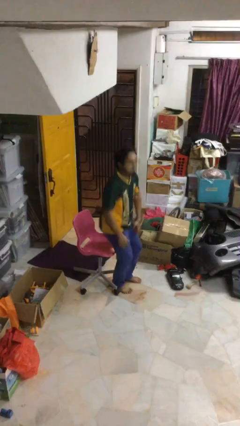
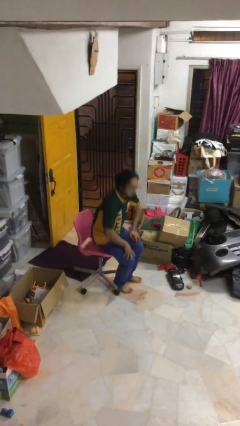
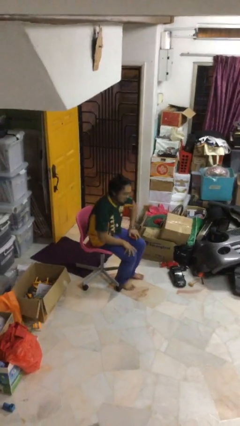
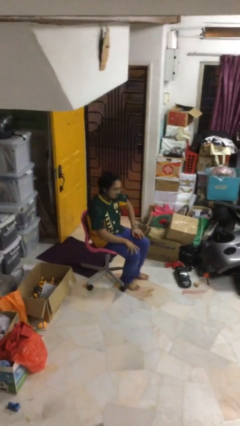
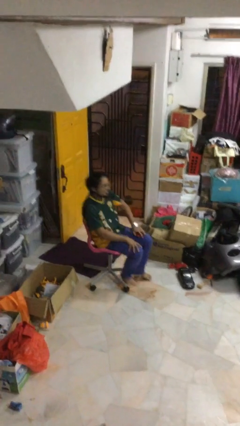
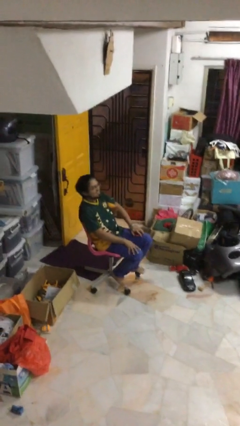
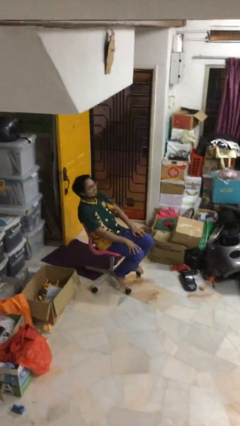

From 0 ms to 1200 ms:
person sits down

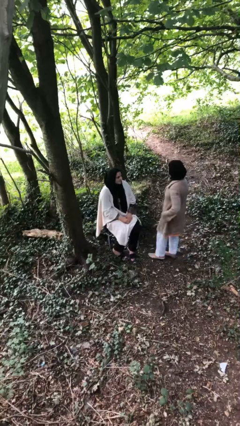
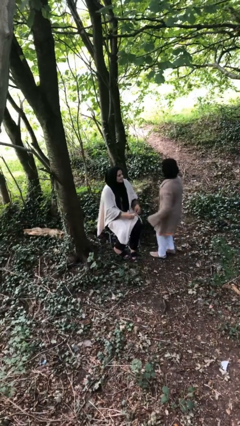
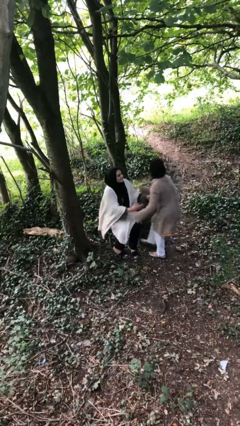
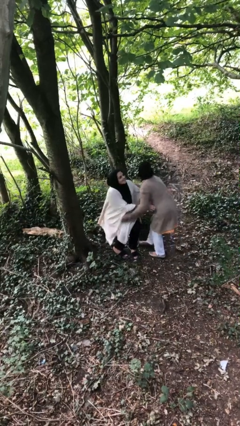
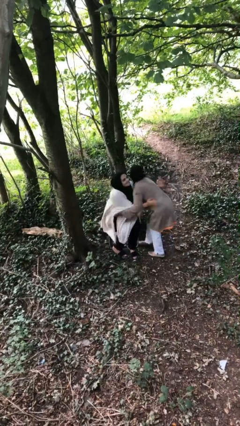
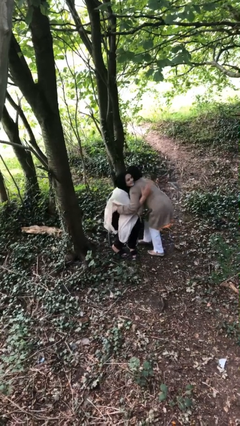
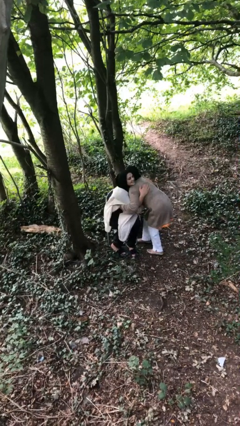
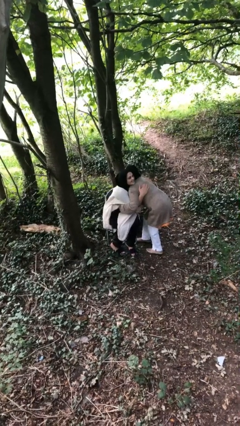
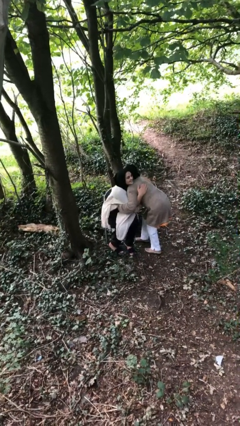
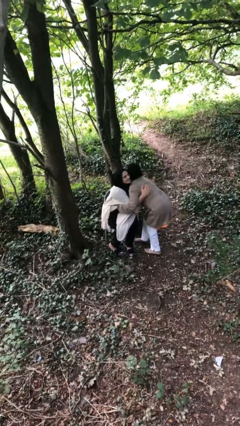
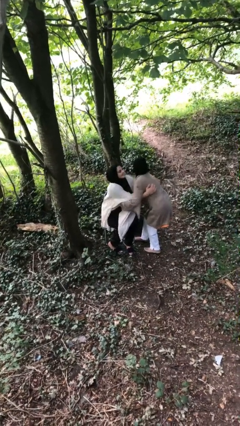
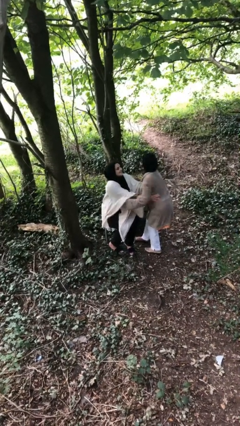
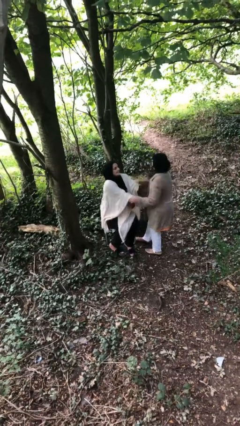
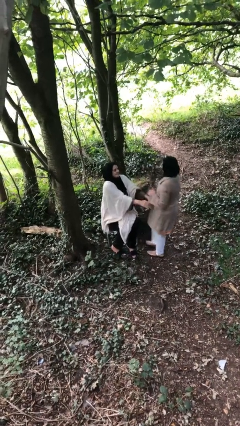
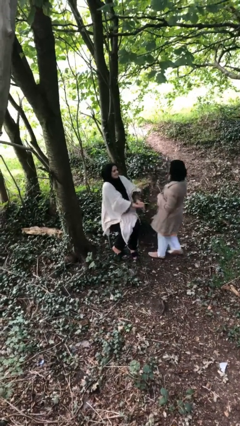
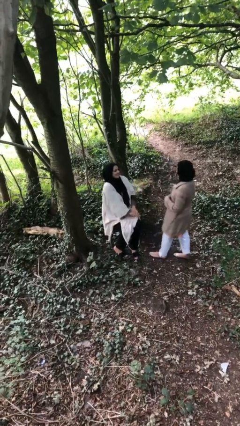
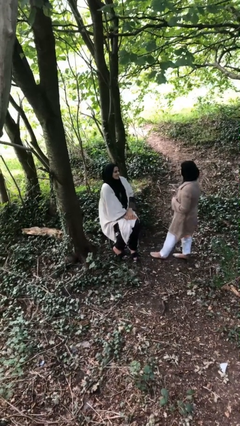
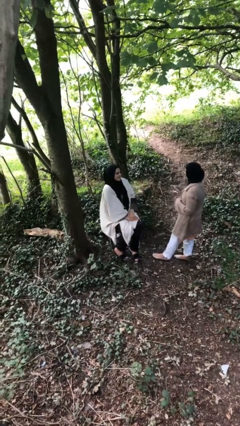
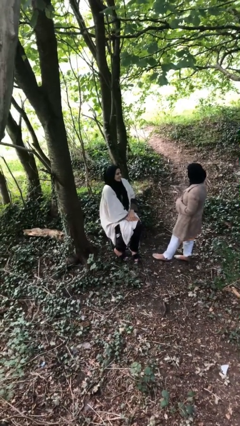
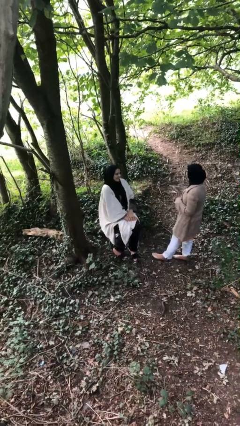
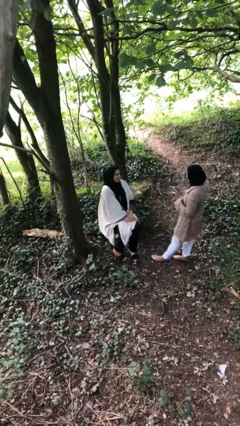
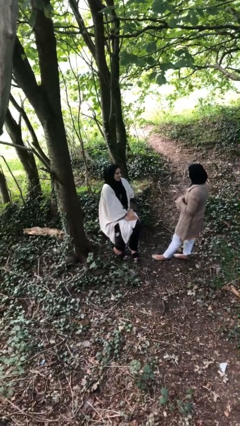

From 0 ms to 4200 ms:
person embraces person

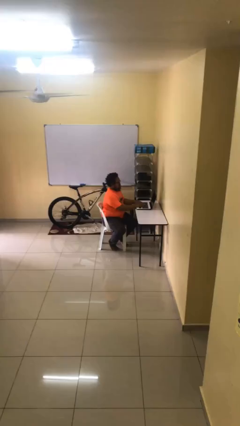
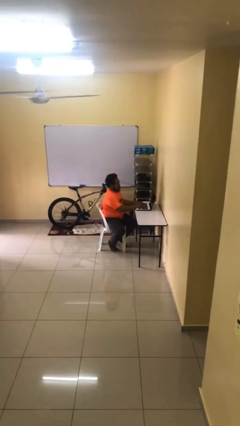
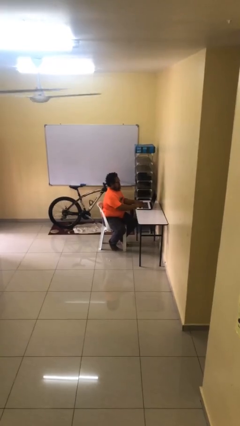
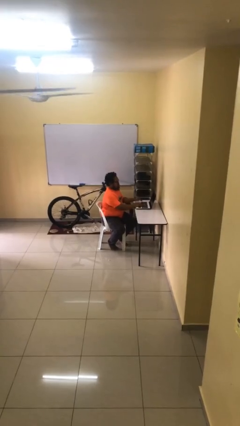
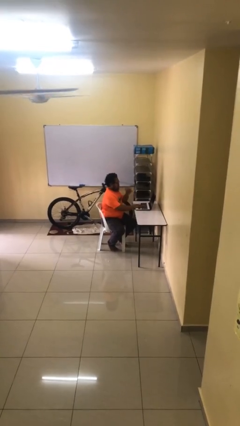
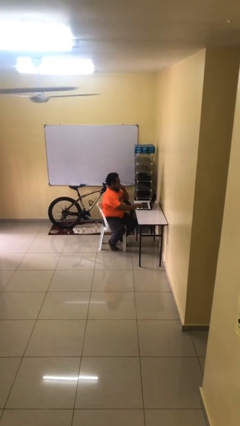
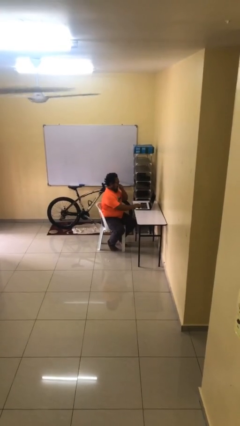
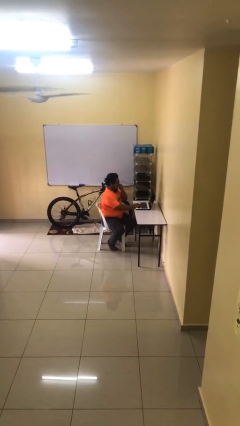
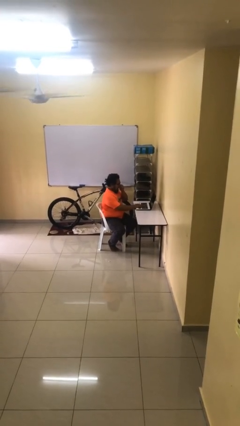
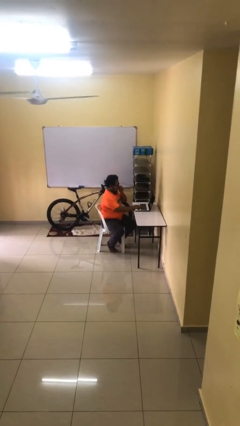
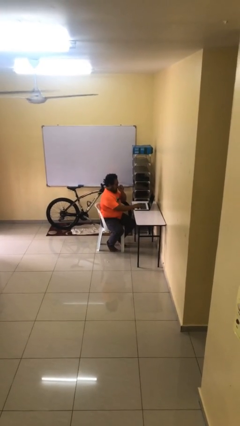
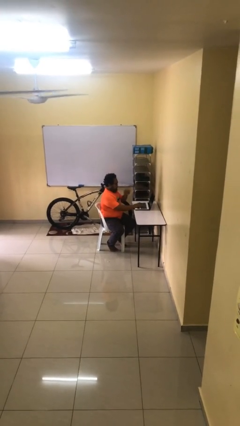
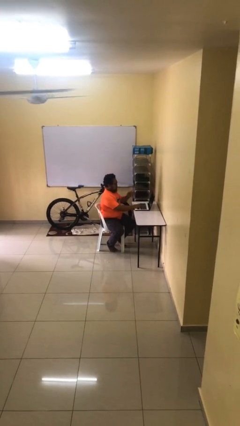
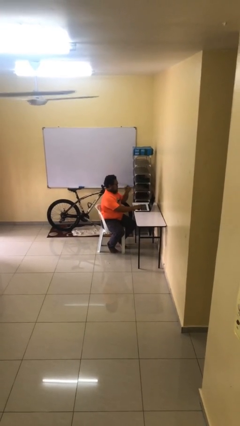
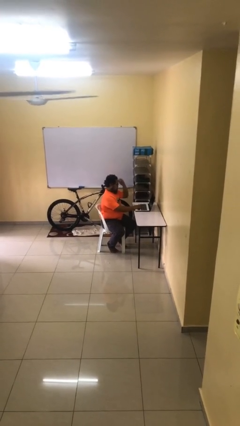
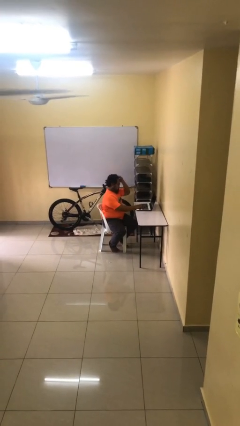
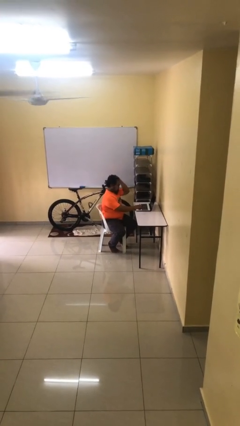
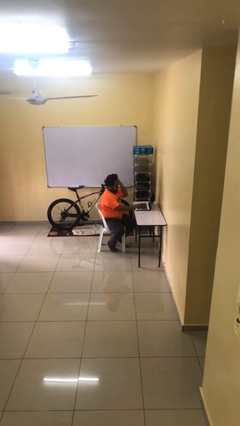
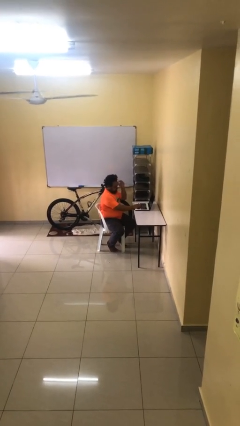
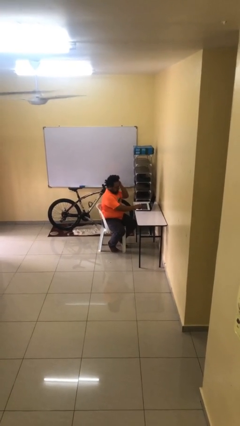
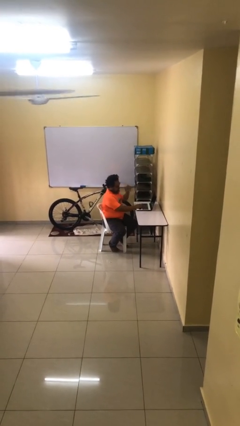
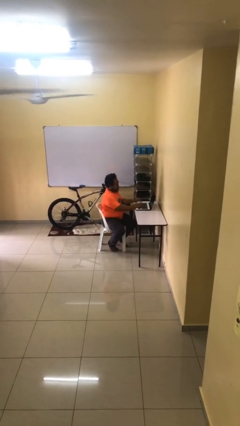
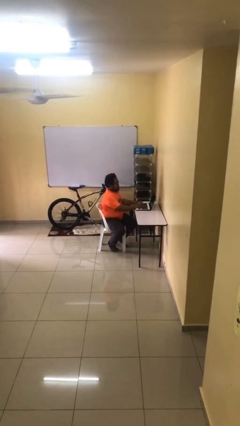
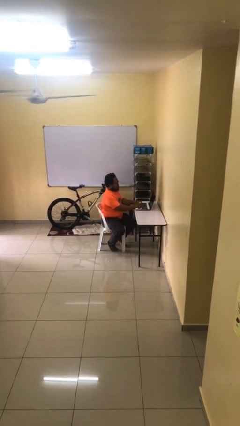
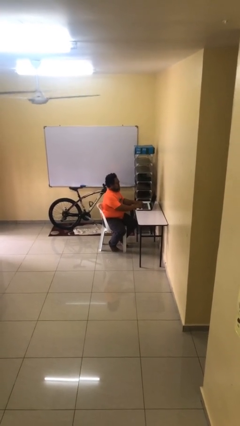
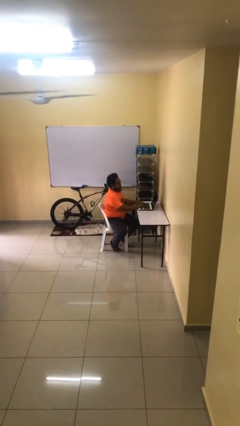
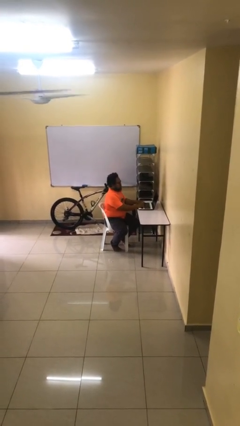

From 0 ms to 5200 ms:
person interacts with laptop

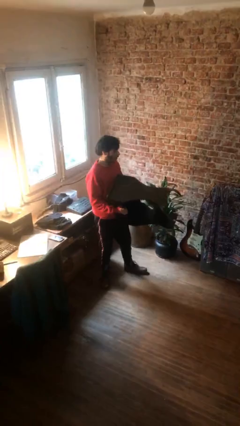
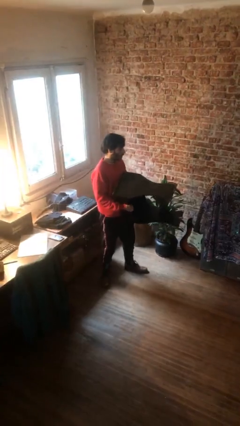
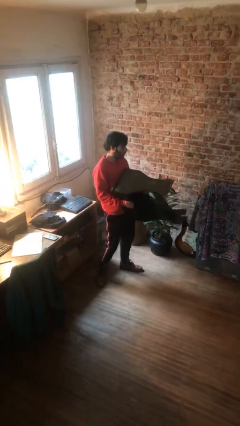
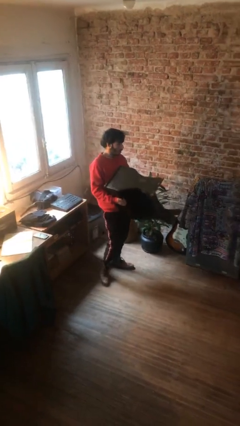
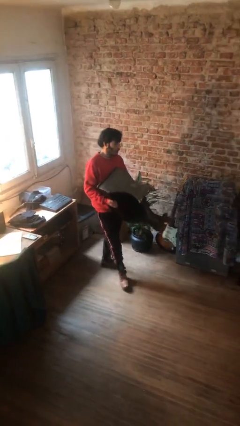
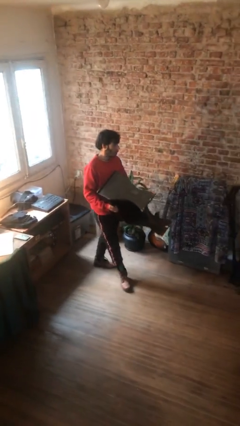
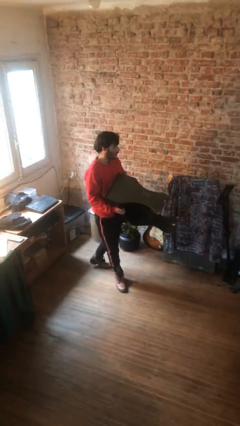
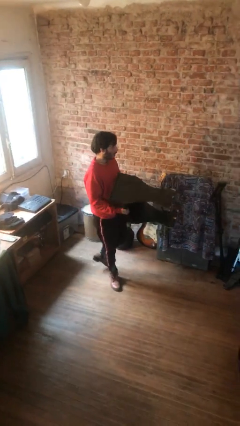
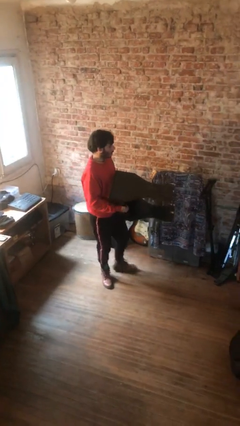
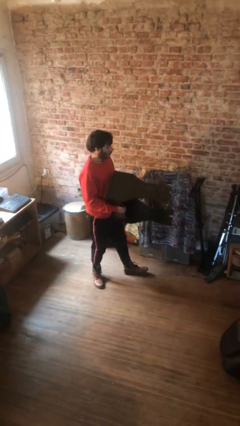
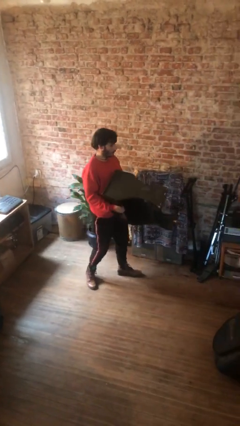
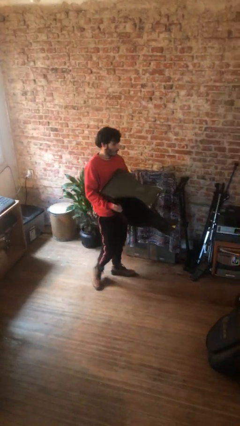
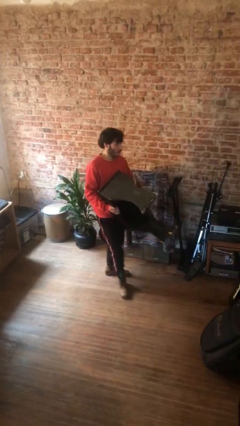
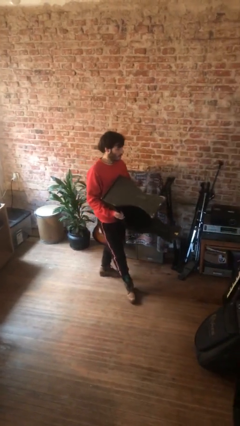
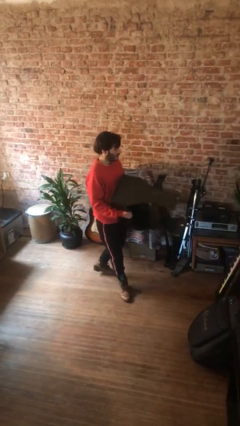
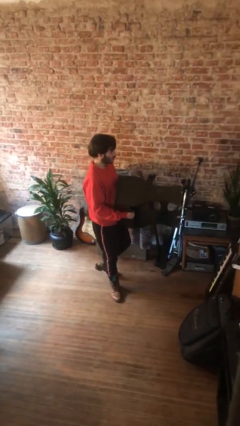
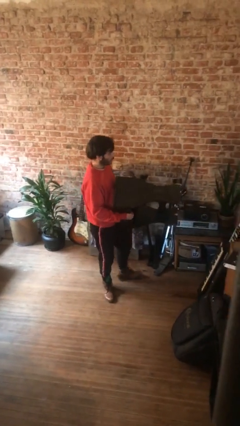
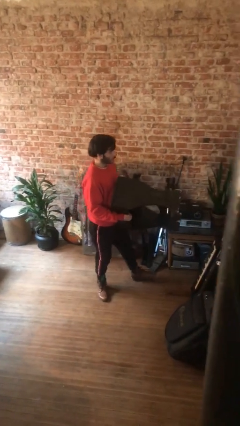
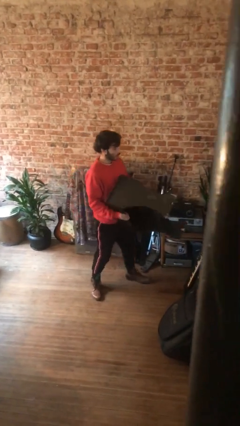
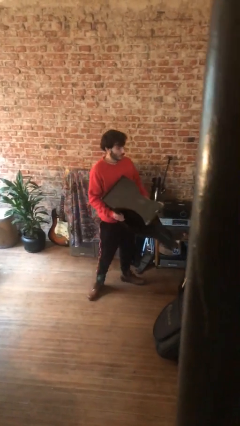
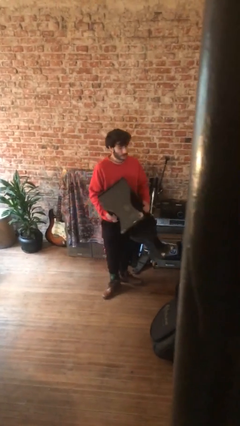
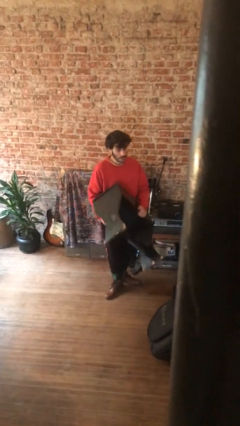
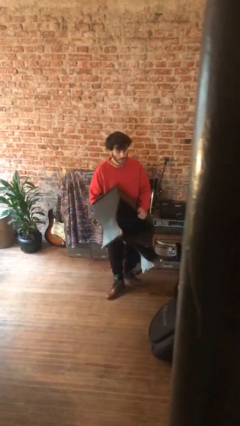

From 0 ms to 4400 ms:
person carries furniture

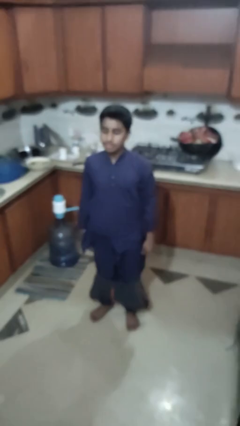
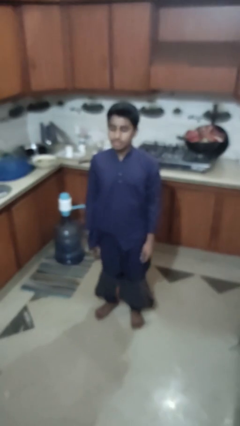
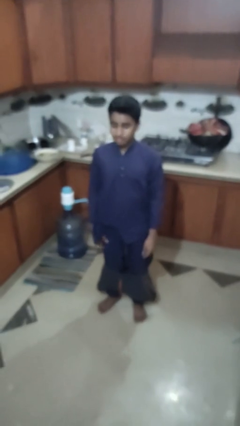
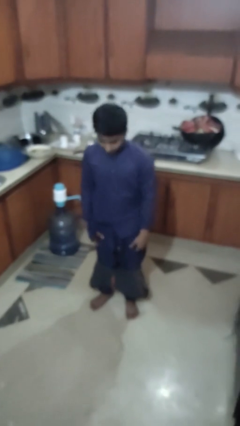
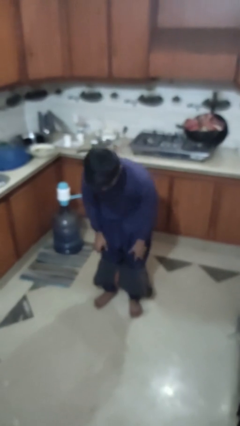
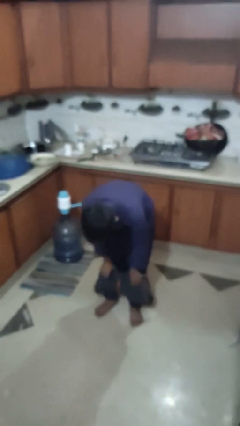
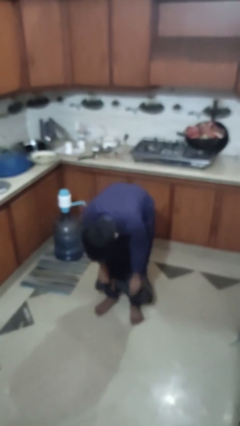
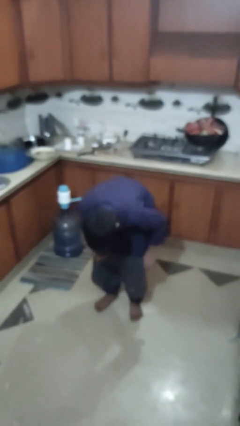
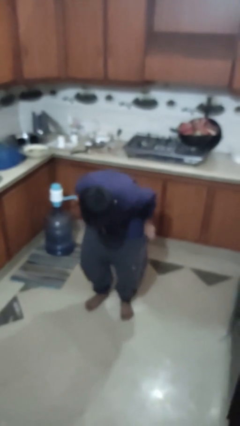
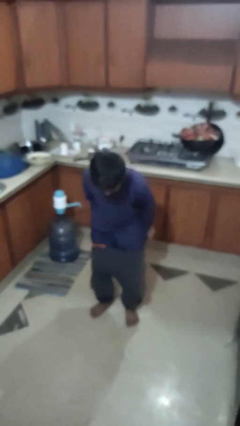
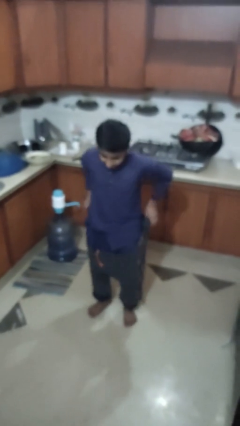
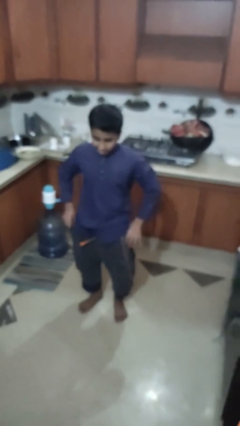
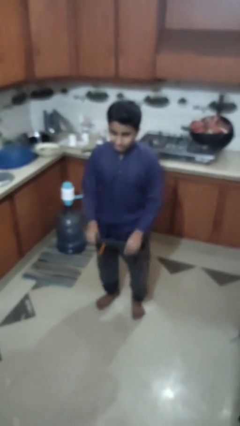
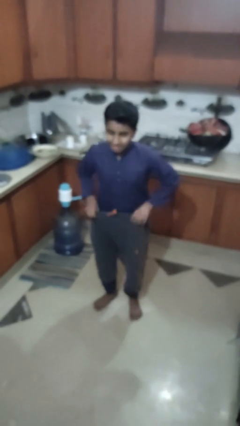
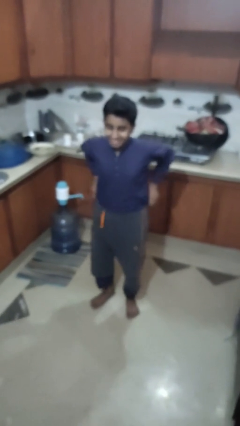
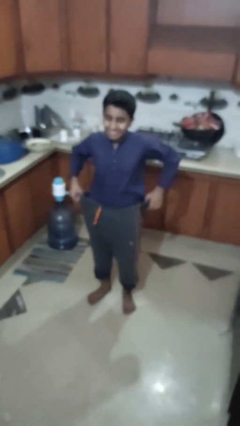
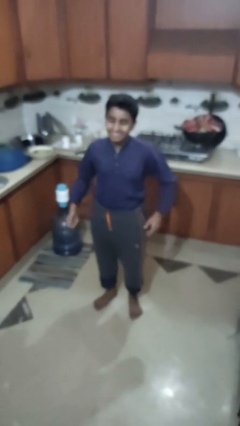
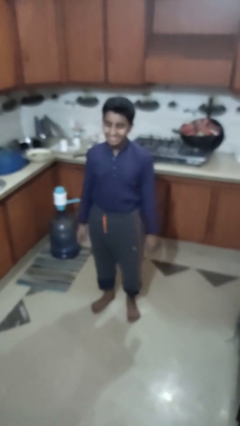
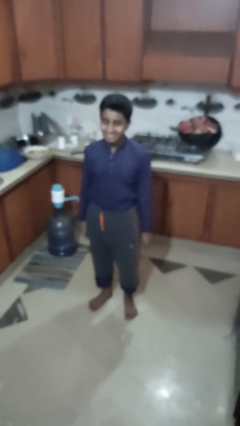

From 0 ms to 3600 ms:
person puts on pants
